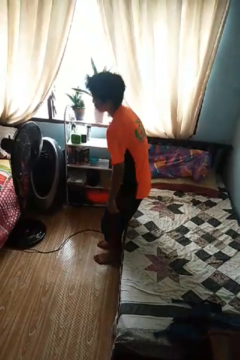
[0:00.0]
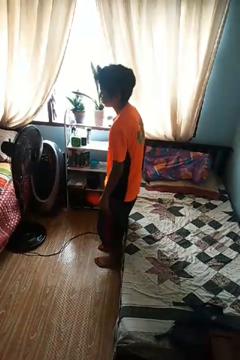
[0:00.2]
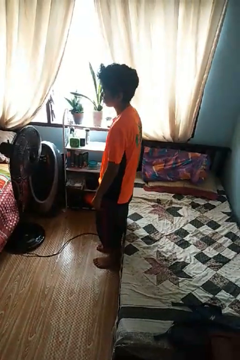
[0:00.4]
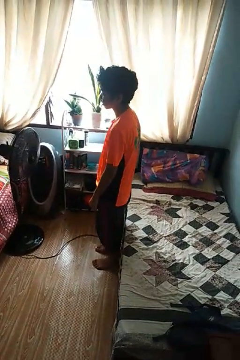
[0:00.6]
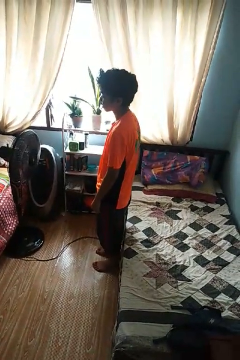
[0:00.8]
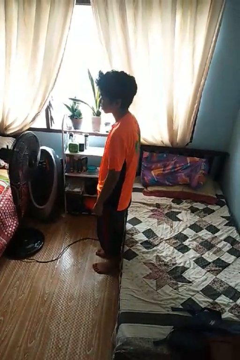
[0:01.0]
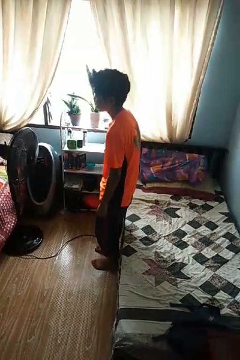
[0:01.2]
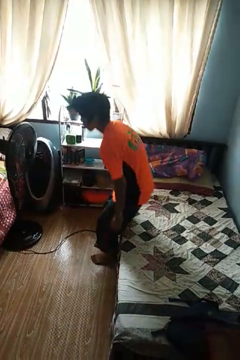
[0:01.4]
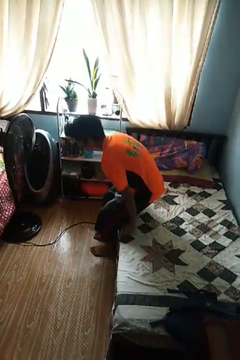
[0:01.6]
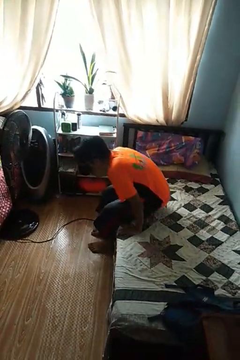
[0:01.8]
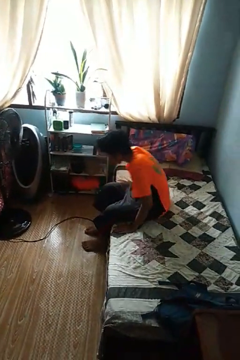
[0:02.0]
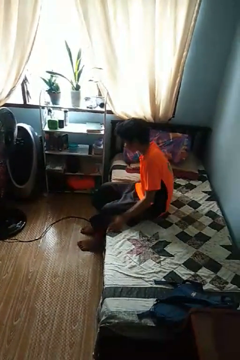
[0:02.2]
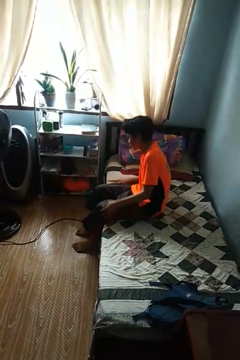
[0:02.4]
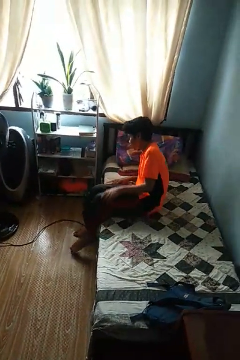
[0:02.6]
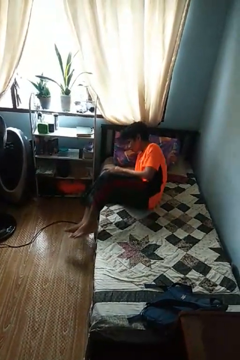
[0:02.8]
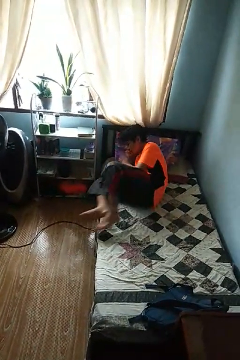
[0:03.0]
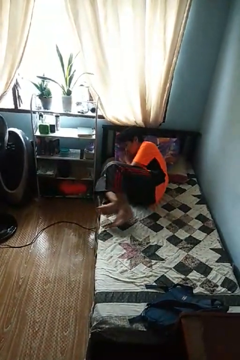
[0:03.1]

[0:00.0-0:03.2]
person lies down on bed

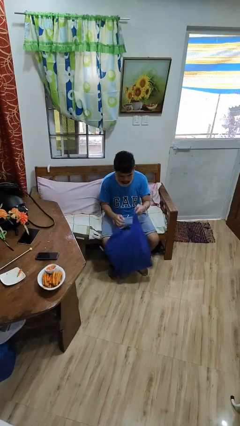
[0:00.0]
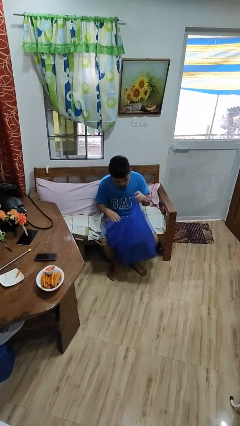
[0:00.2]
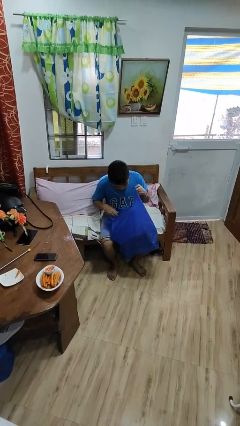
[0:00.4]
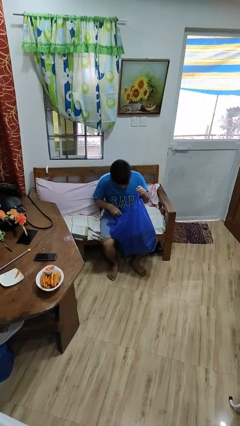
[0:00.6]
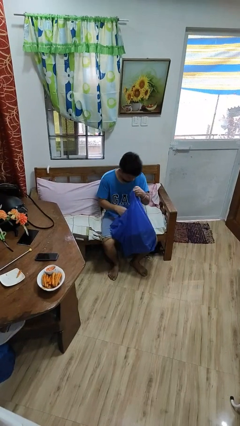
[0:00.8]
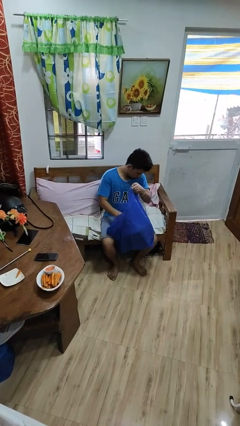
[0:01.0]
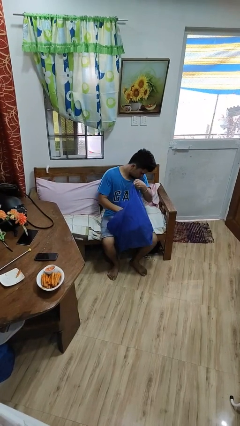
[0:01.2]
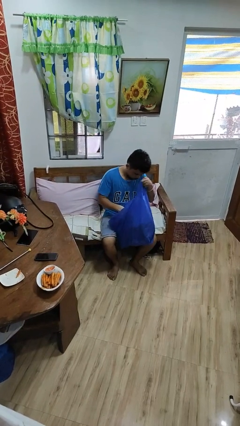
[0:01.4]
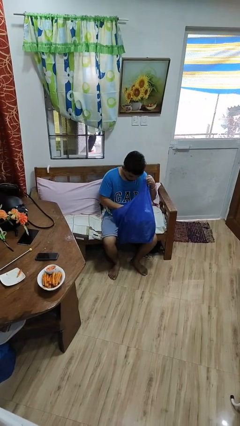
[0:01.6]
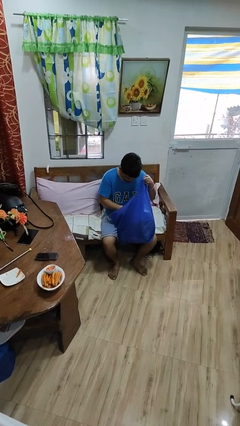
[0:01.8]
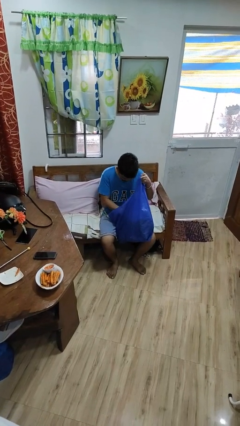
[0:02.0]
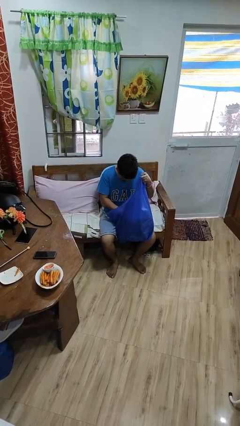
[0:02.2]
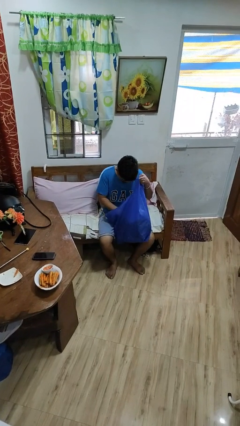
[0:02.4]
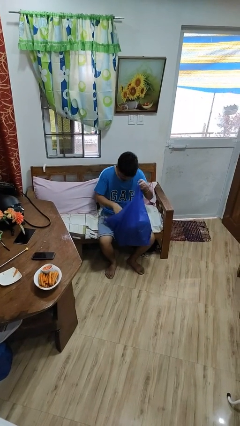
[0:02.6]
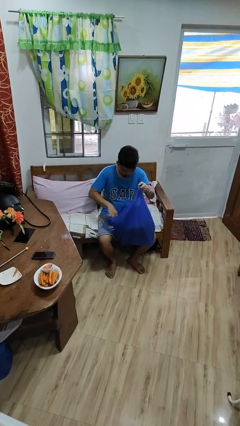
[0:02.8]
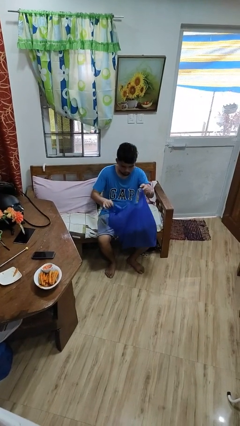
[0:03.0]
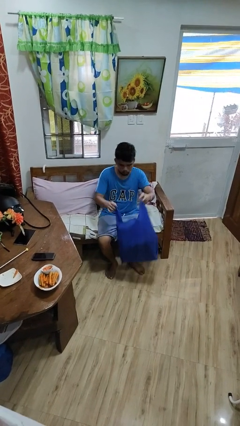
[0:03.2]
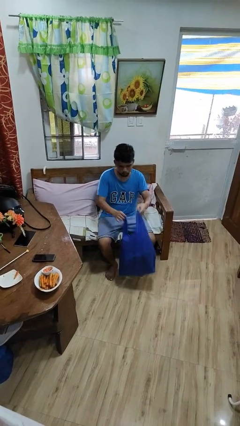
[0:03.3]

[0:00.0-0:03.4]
person searches in bag

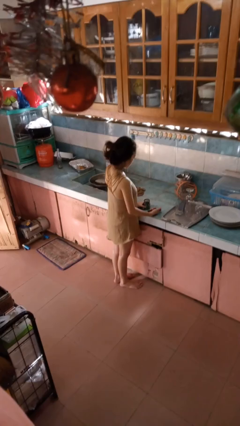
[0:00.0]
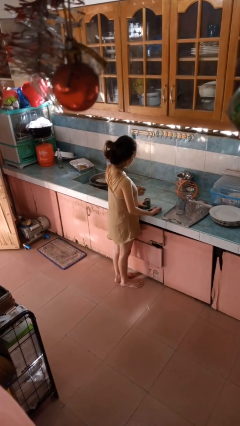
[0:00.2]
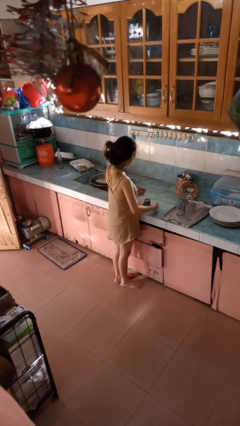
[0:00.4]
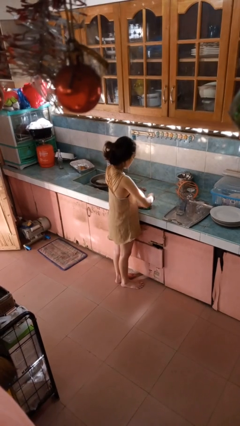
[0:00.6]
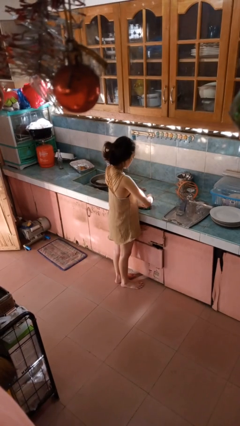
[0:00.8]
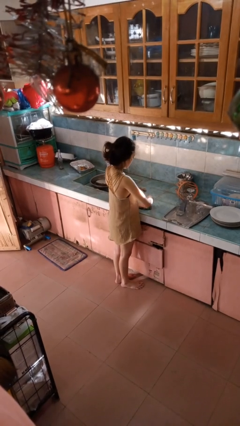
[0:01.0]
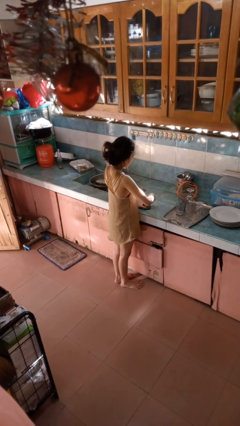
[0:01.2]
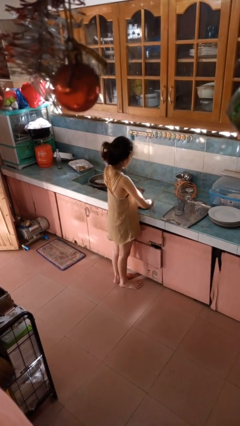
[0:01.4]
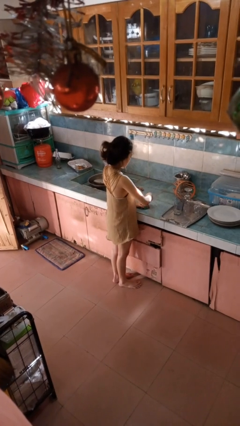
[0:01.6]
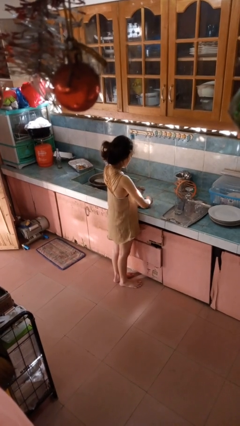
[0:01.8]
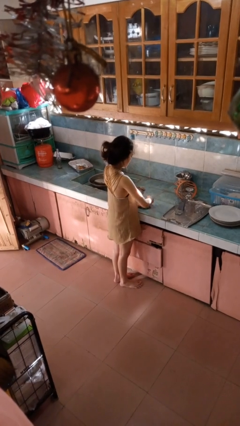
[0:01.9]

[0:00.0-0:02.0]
person opens can with can opener

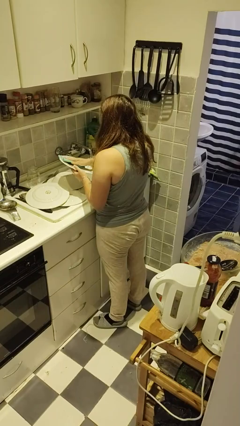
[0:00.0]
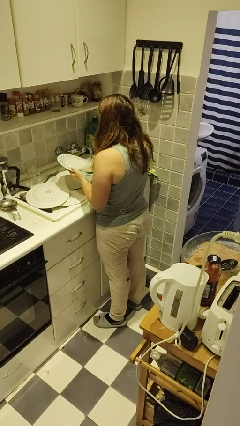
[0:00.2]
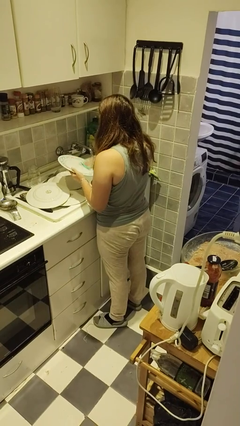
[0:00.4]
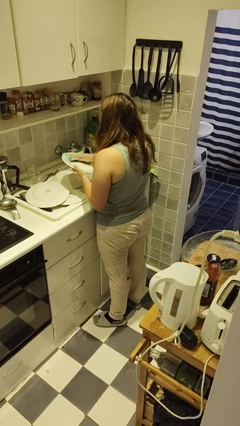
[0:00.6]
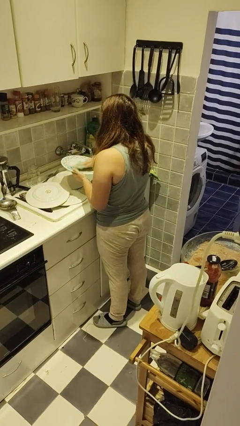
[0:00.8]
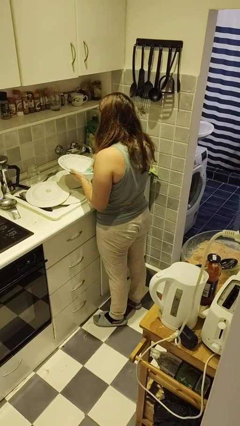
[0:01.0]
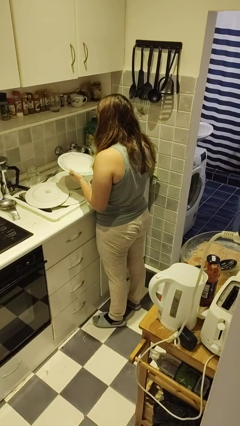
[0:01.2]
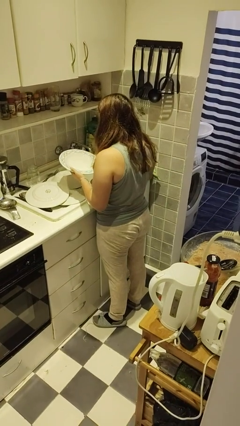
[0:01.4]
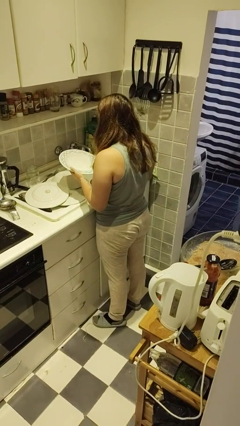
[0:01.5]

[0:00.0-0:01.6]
person dries dish

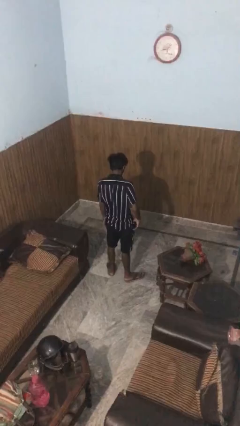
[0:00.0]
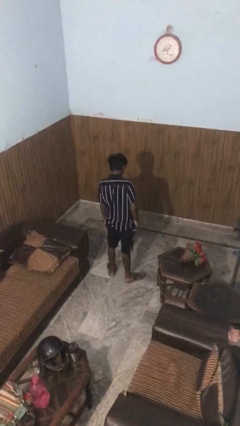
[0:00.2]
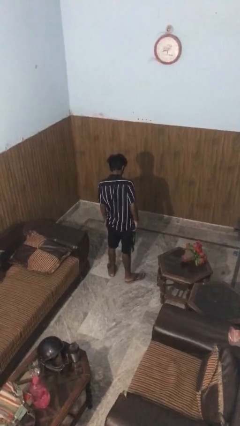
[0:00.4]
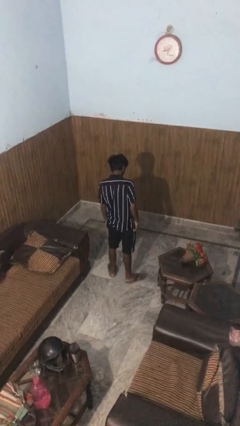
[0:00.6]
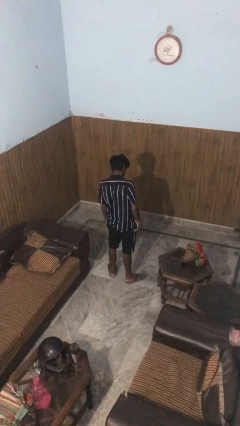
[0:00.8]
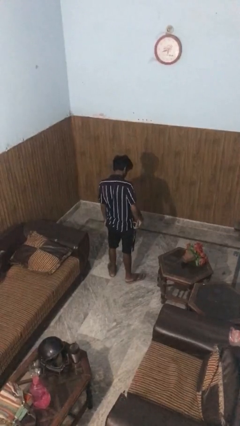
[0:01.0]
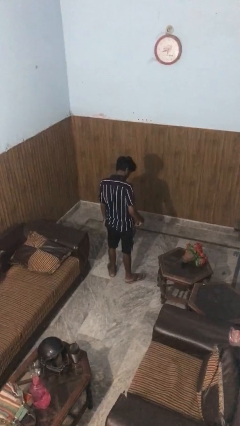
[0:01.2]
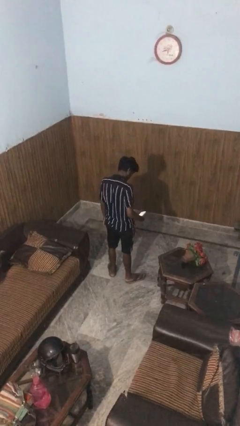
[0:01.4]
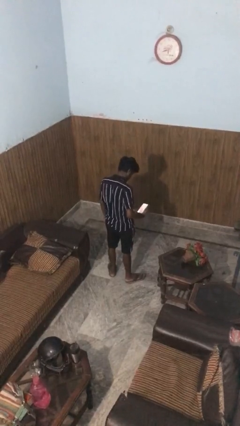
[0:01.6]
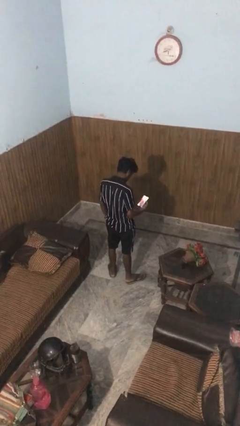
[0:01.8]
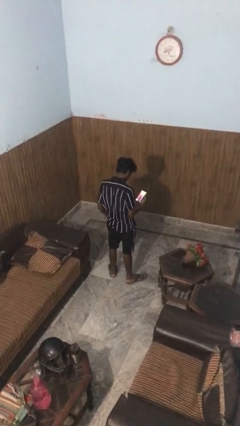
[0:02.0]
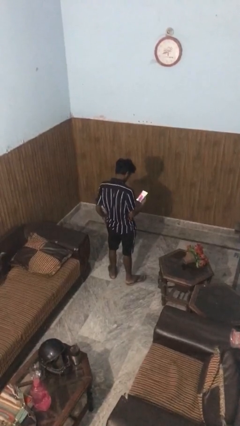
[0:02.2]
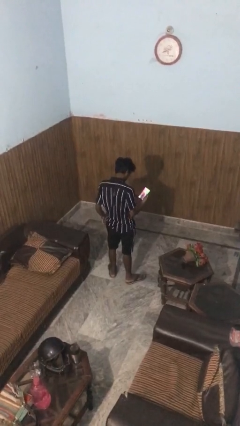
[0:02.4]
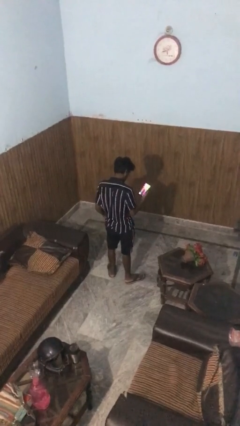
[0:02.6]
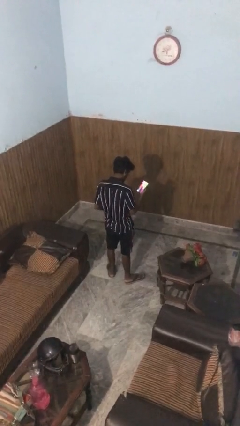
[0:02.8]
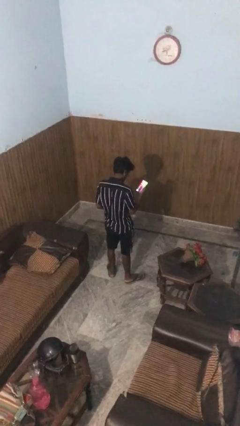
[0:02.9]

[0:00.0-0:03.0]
person takes phone from pocket

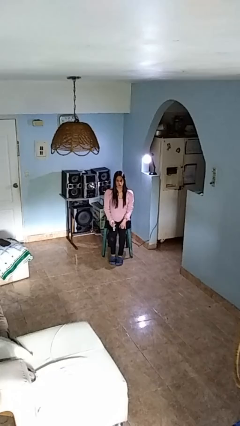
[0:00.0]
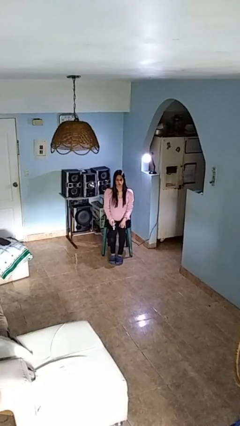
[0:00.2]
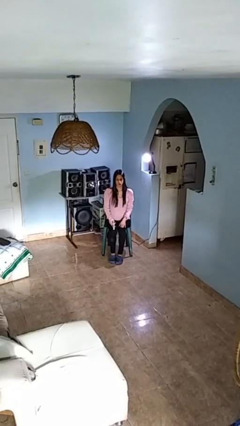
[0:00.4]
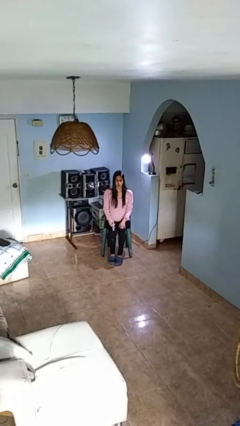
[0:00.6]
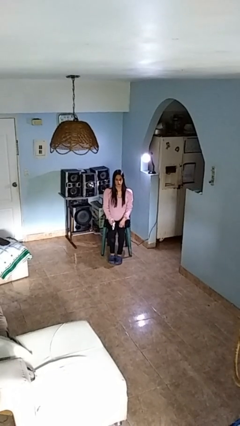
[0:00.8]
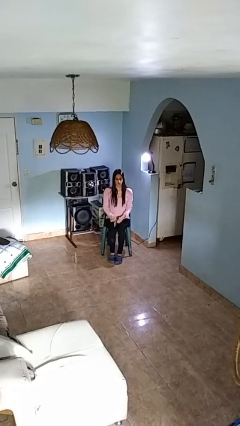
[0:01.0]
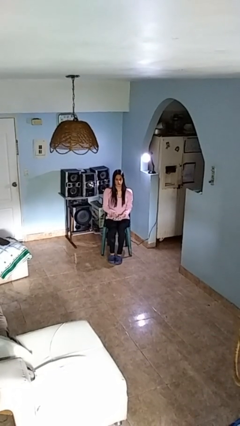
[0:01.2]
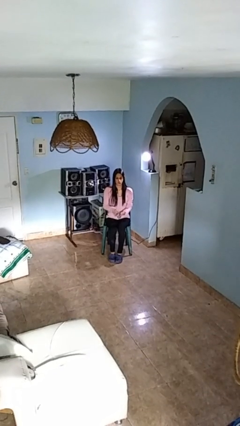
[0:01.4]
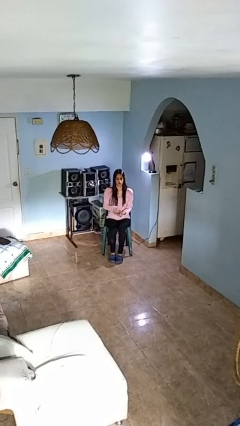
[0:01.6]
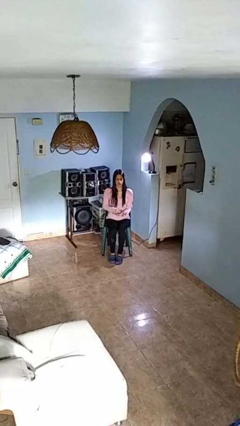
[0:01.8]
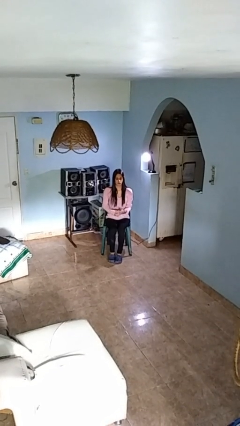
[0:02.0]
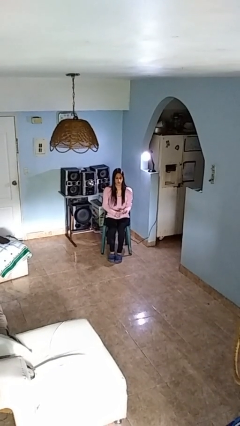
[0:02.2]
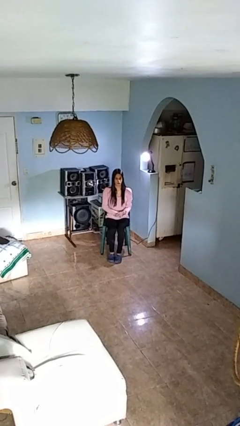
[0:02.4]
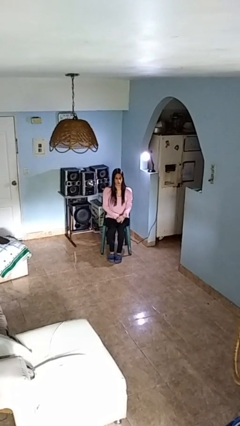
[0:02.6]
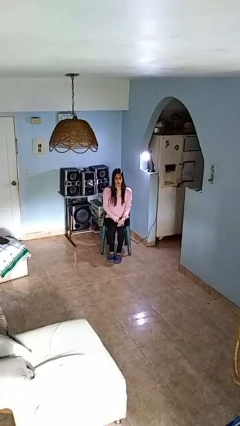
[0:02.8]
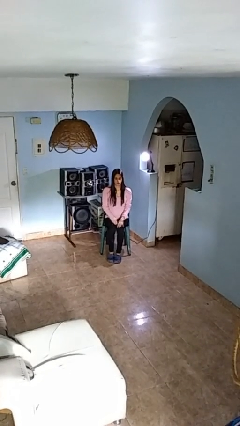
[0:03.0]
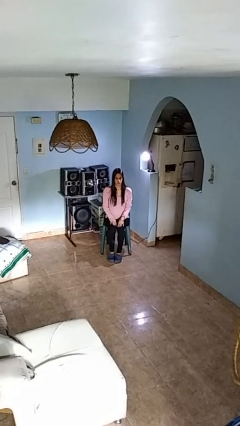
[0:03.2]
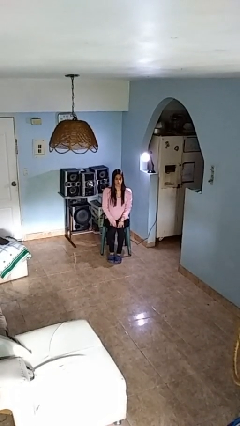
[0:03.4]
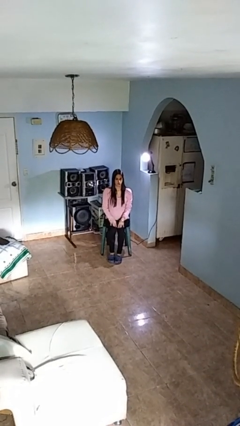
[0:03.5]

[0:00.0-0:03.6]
person puts on wristwatch

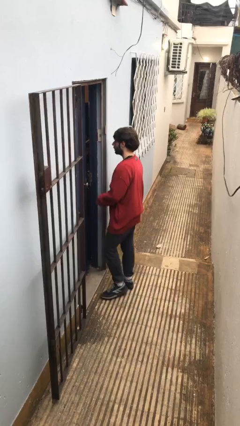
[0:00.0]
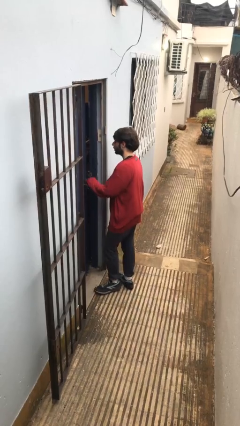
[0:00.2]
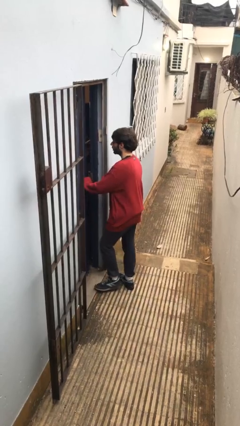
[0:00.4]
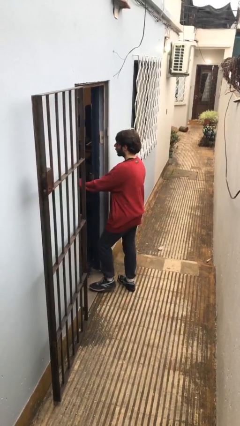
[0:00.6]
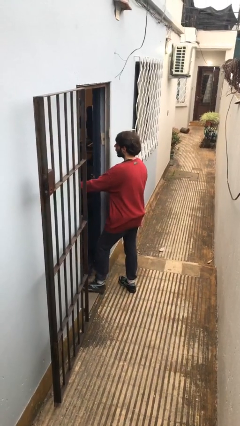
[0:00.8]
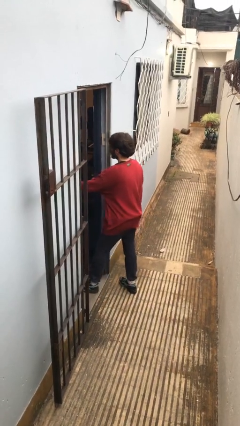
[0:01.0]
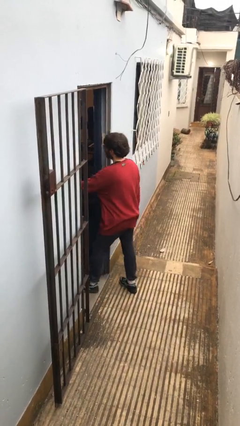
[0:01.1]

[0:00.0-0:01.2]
person opens facility door
